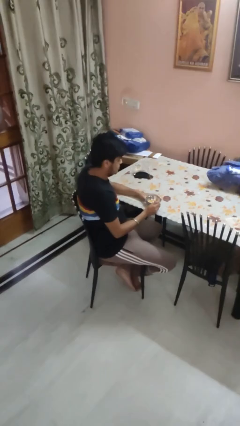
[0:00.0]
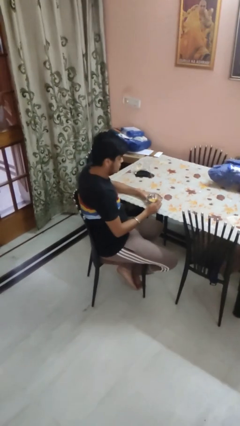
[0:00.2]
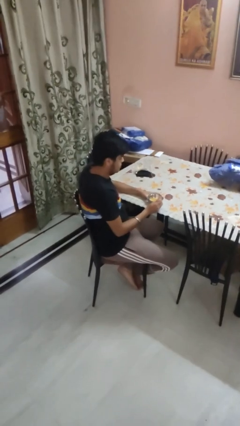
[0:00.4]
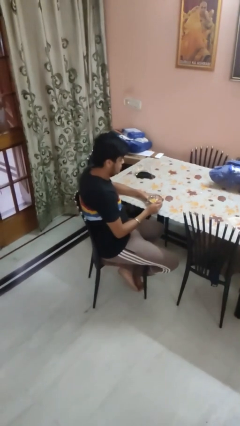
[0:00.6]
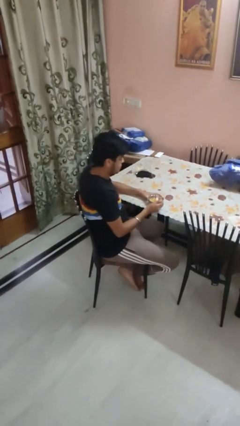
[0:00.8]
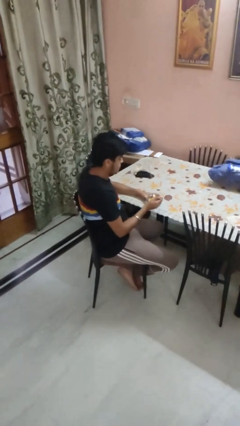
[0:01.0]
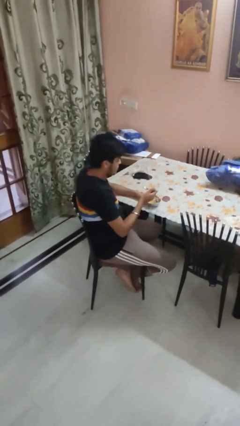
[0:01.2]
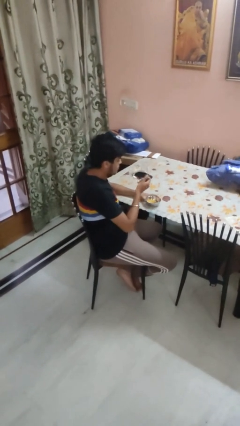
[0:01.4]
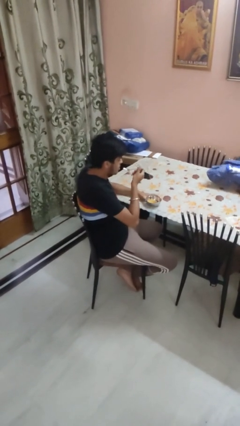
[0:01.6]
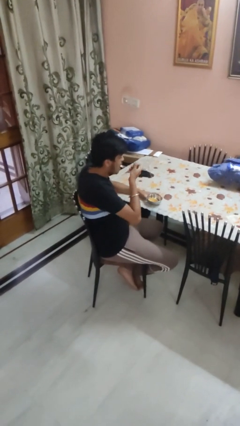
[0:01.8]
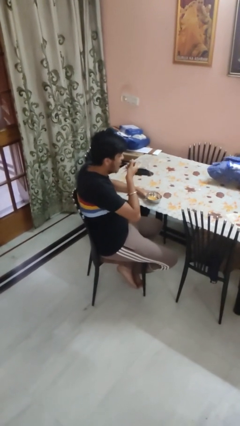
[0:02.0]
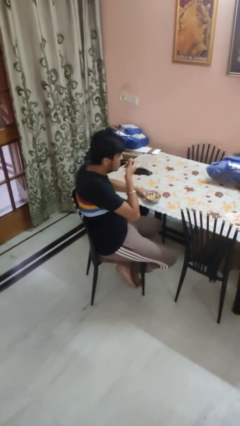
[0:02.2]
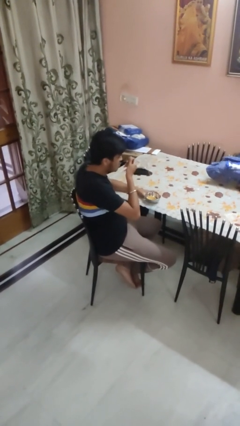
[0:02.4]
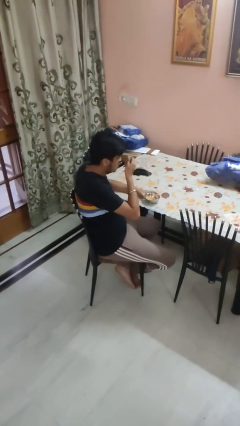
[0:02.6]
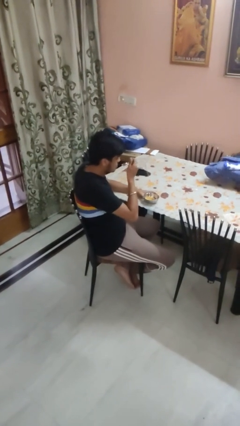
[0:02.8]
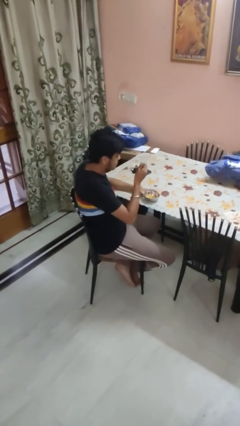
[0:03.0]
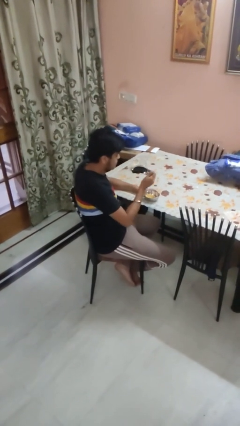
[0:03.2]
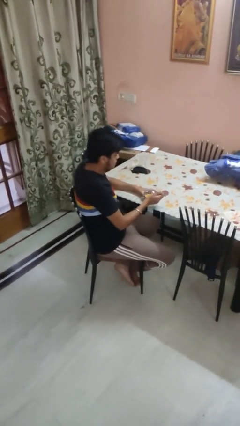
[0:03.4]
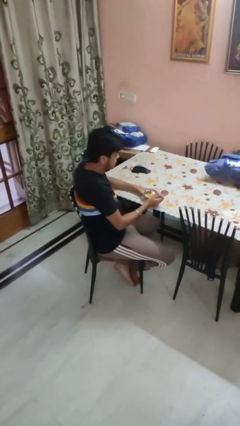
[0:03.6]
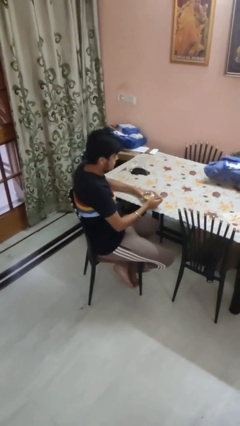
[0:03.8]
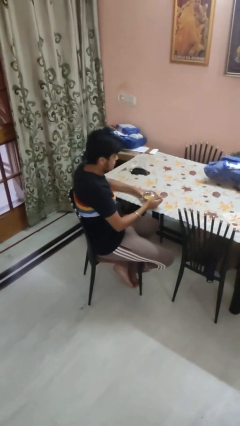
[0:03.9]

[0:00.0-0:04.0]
person eats with utensil

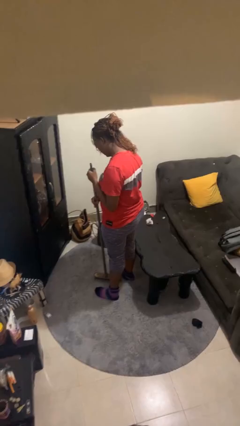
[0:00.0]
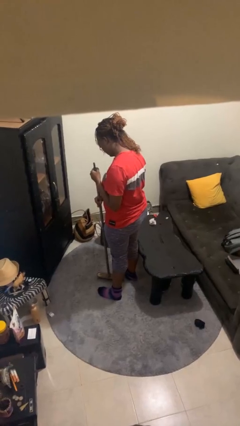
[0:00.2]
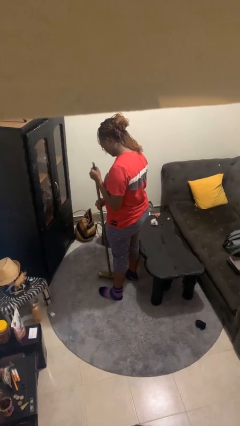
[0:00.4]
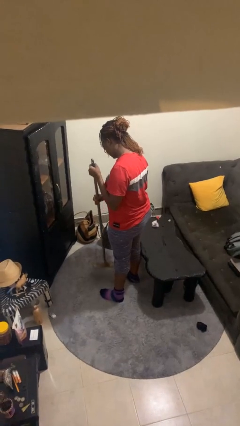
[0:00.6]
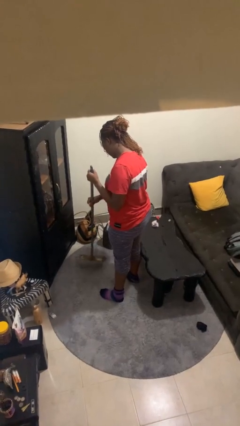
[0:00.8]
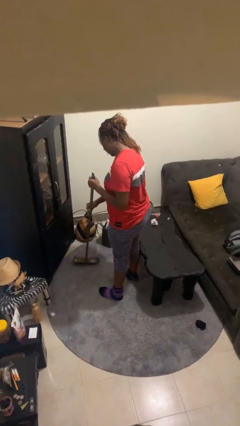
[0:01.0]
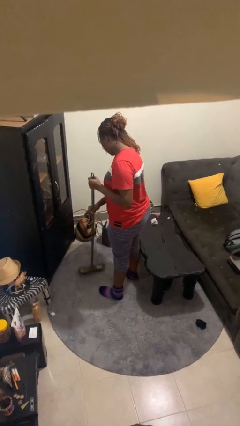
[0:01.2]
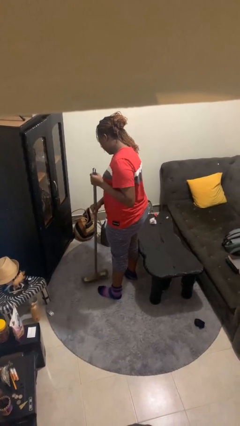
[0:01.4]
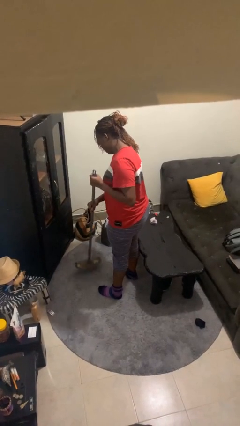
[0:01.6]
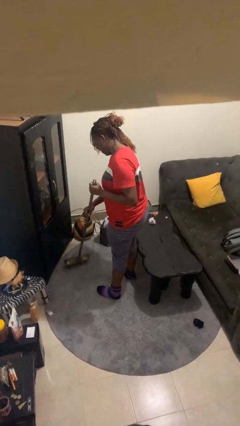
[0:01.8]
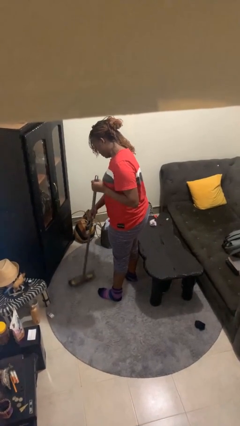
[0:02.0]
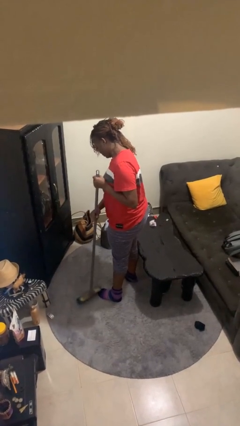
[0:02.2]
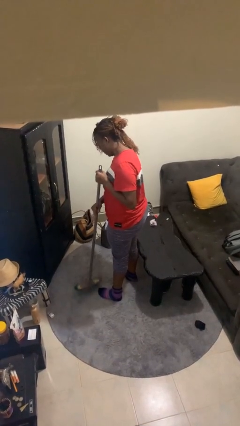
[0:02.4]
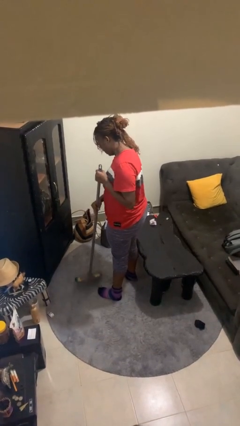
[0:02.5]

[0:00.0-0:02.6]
person sweeps floor

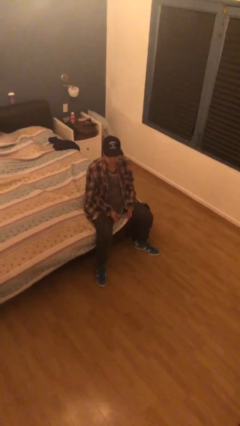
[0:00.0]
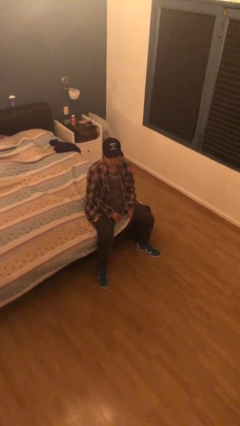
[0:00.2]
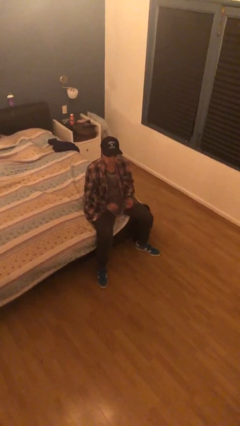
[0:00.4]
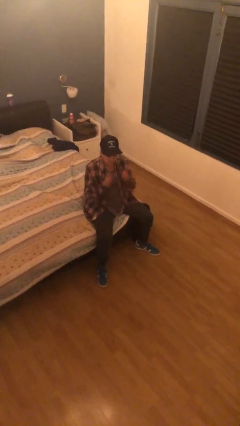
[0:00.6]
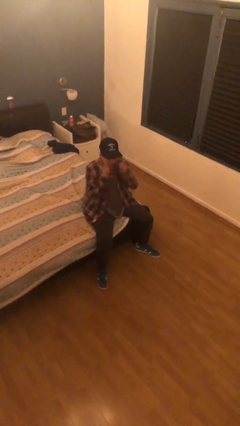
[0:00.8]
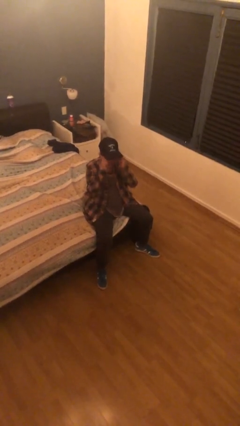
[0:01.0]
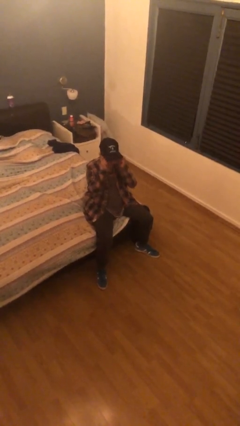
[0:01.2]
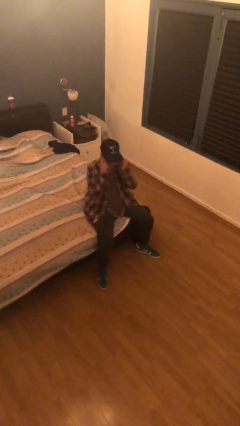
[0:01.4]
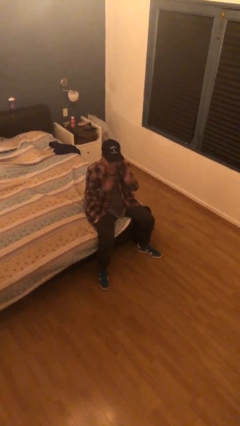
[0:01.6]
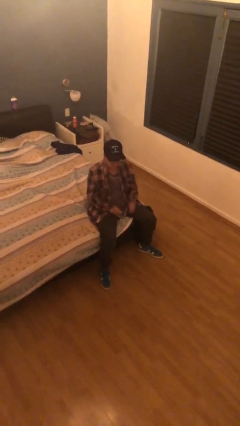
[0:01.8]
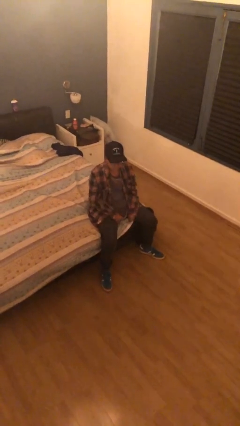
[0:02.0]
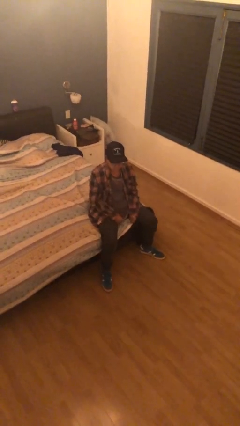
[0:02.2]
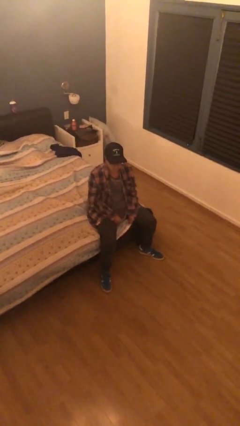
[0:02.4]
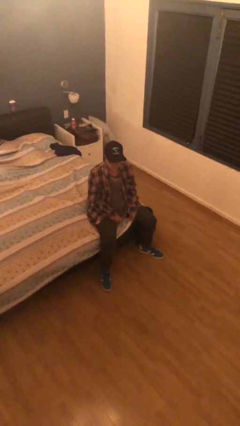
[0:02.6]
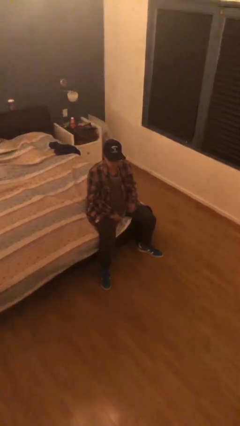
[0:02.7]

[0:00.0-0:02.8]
person puts on glasses

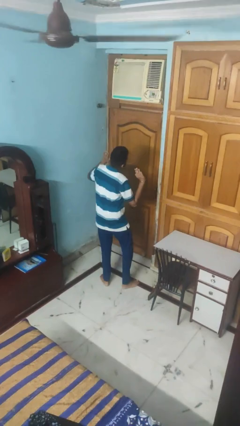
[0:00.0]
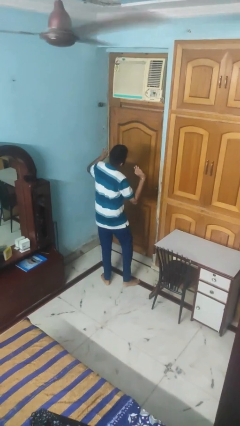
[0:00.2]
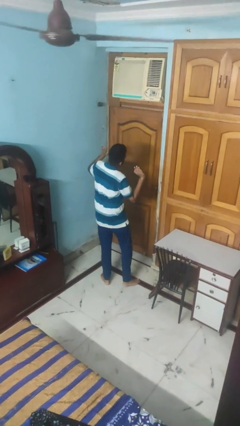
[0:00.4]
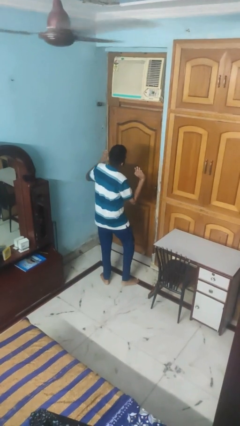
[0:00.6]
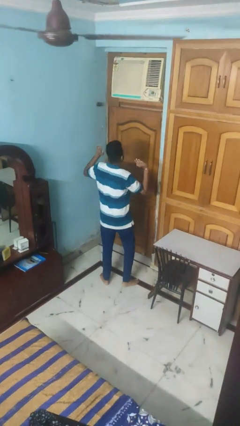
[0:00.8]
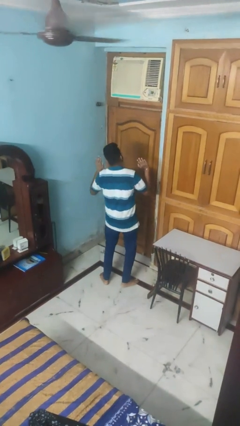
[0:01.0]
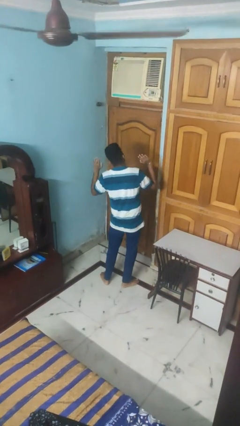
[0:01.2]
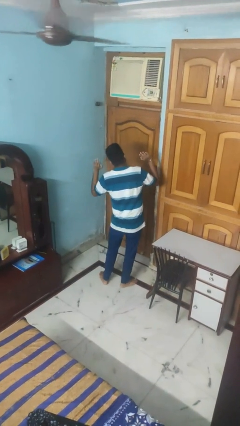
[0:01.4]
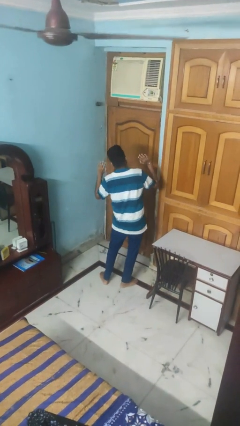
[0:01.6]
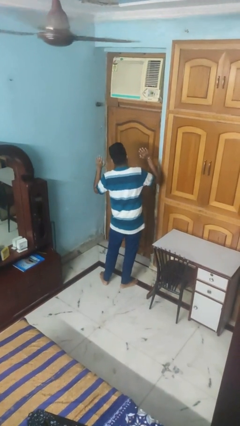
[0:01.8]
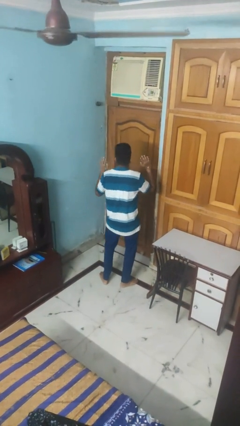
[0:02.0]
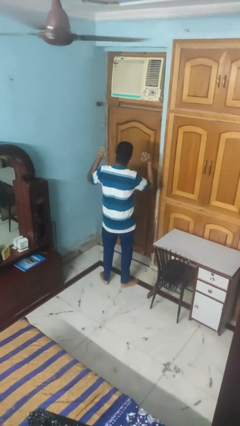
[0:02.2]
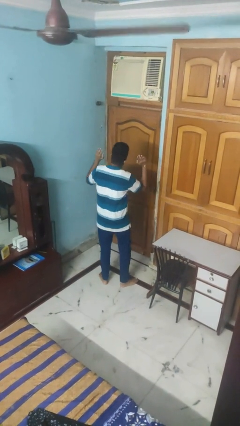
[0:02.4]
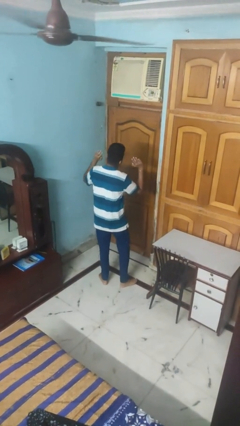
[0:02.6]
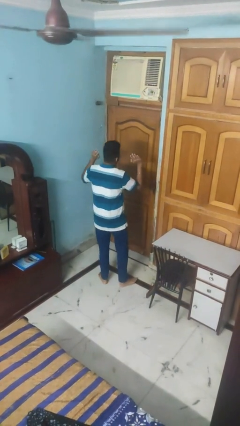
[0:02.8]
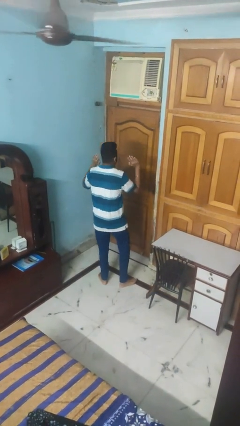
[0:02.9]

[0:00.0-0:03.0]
person dances in place

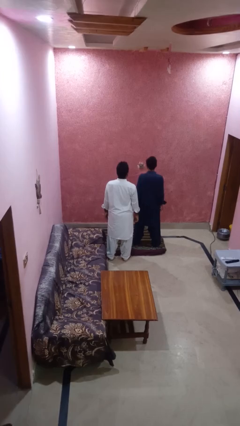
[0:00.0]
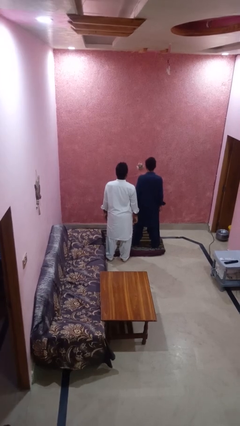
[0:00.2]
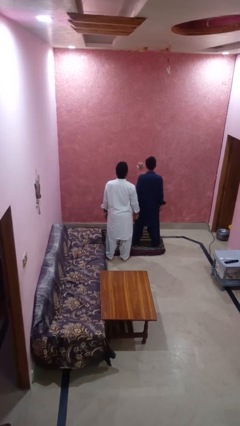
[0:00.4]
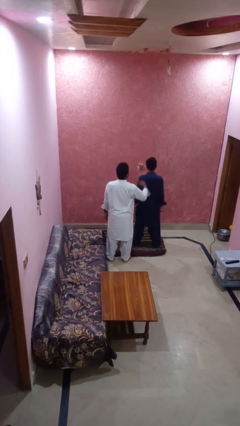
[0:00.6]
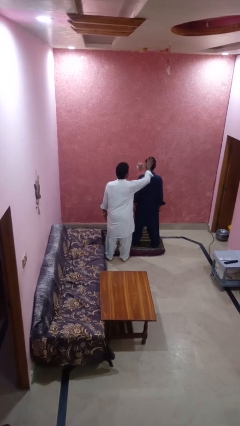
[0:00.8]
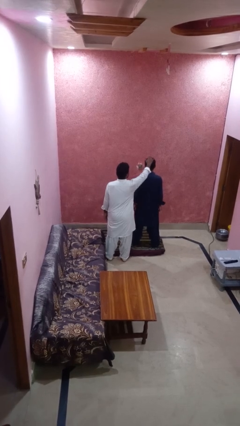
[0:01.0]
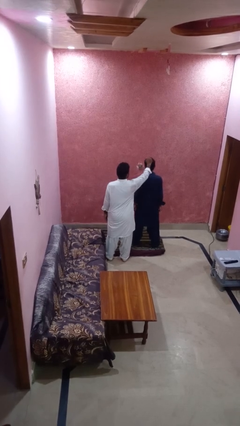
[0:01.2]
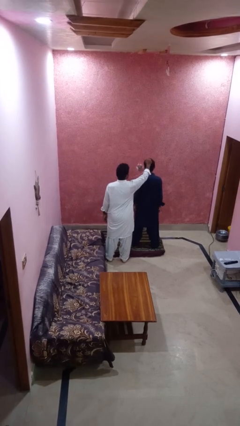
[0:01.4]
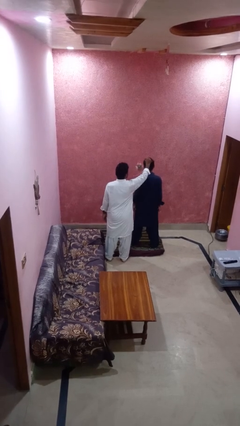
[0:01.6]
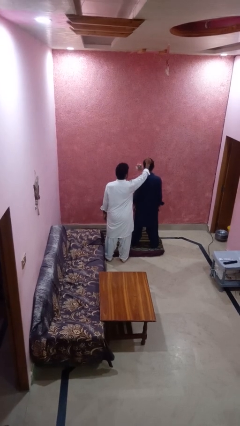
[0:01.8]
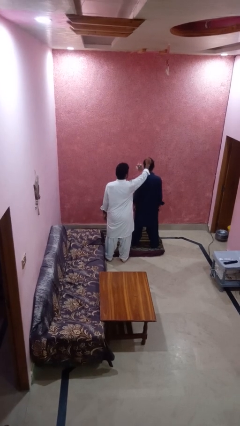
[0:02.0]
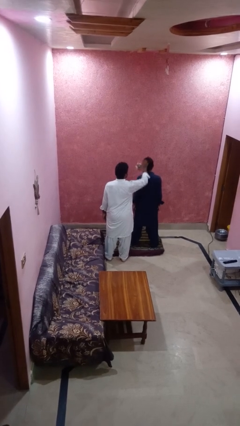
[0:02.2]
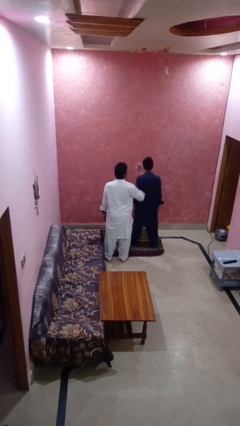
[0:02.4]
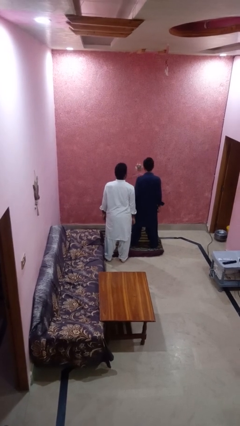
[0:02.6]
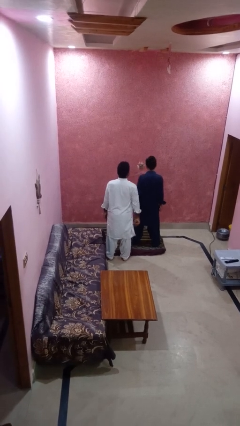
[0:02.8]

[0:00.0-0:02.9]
person grabs person by hair

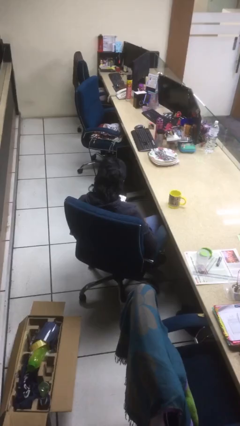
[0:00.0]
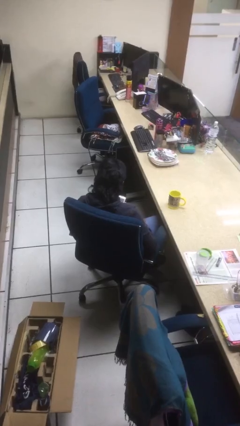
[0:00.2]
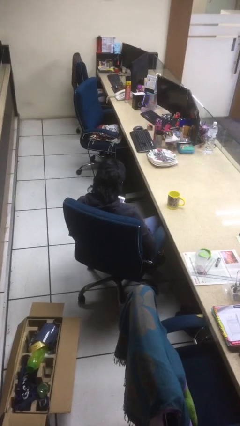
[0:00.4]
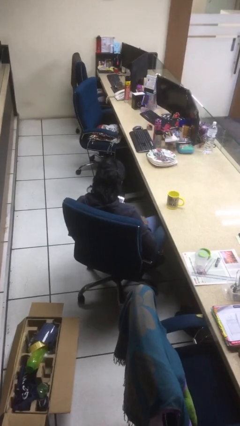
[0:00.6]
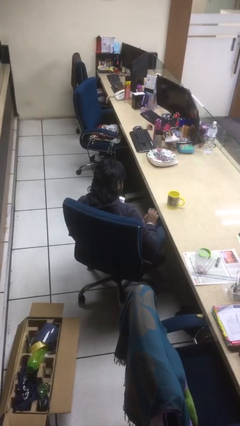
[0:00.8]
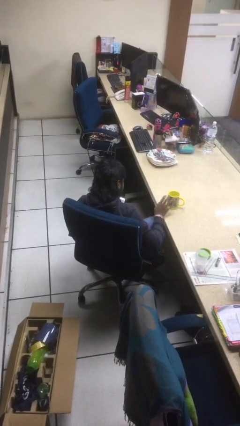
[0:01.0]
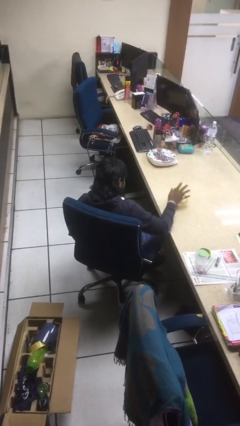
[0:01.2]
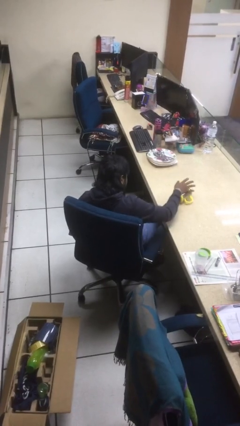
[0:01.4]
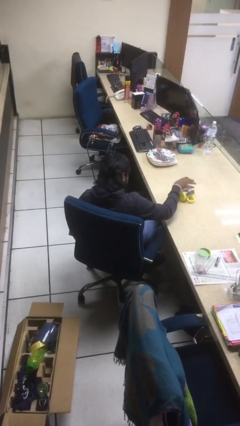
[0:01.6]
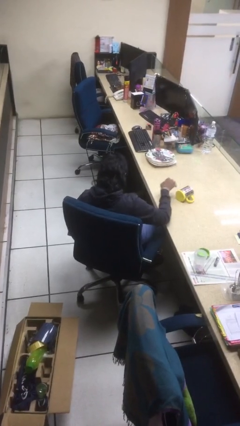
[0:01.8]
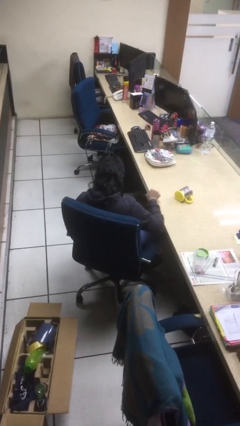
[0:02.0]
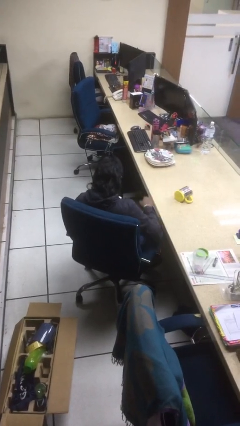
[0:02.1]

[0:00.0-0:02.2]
person knocks over glass
